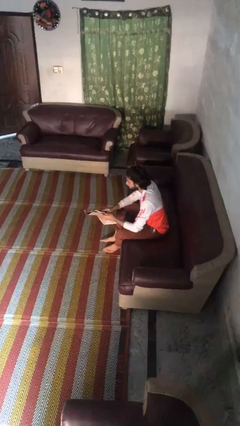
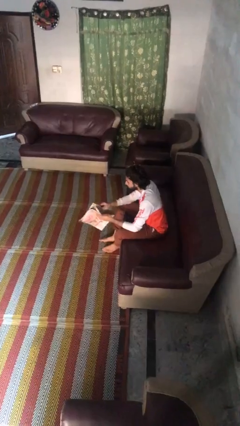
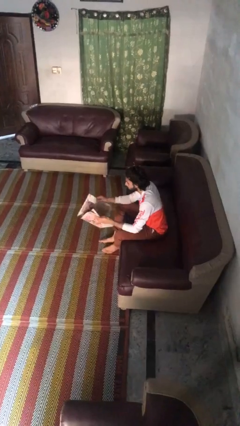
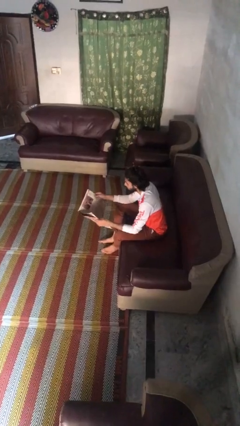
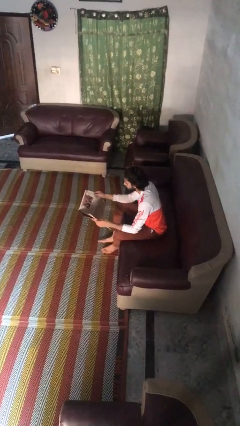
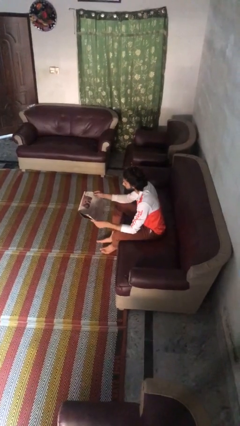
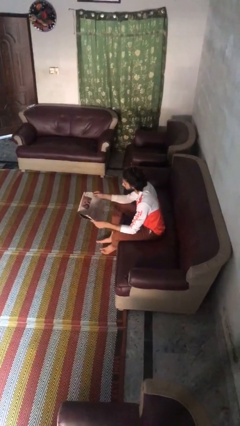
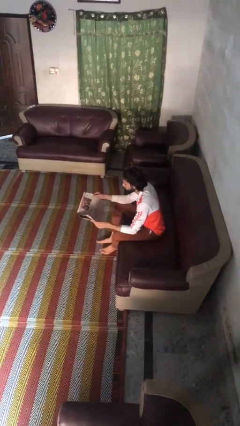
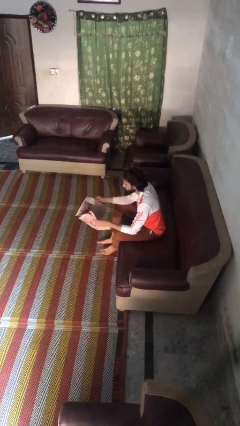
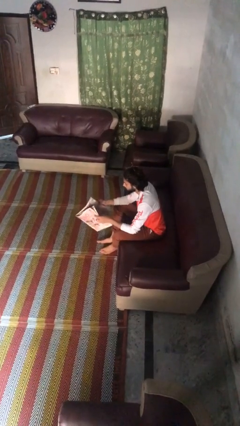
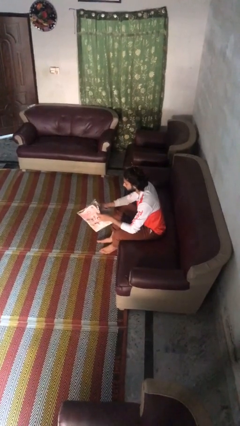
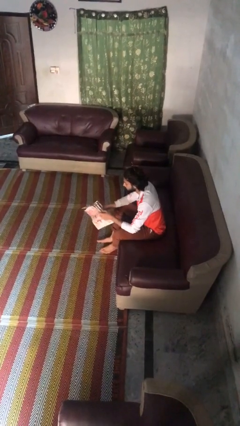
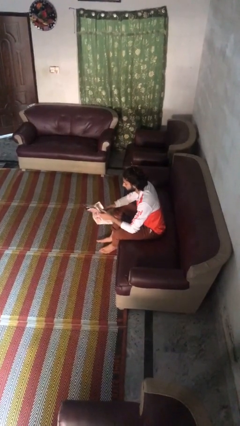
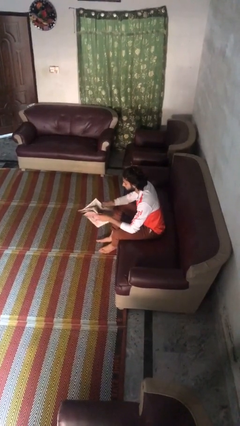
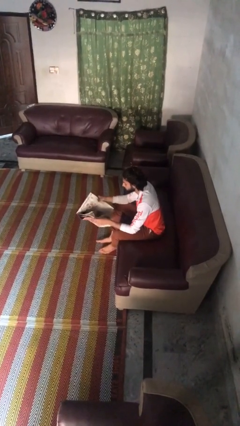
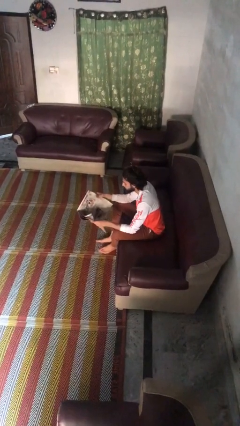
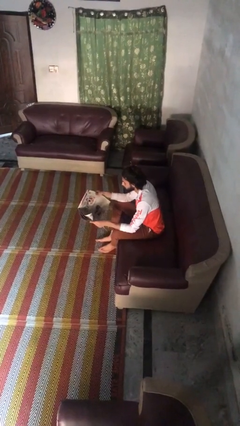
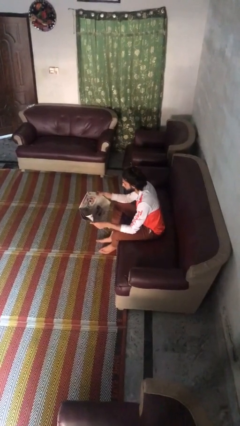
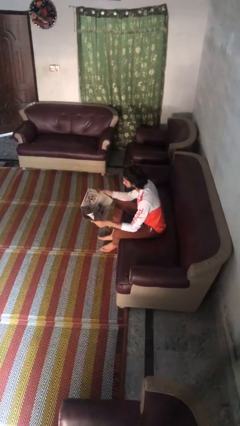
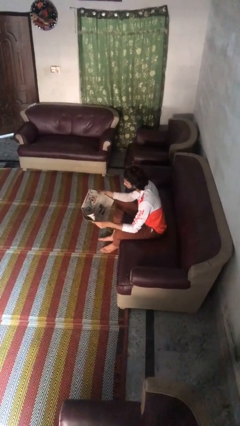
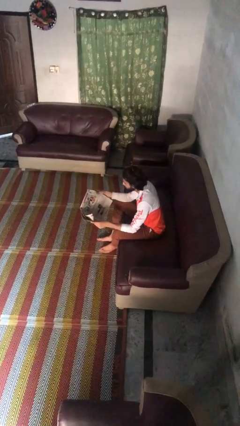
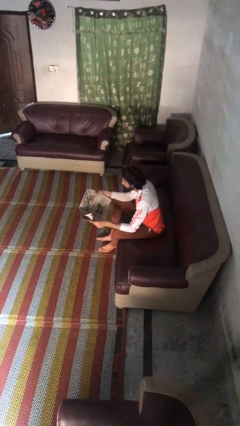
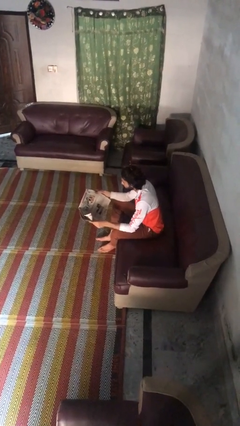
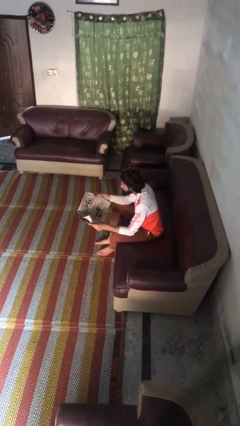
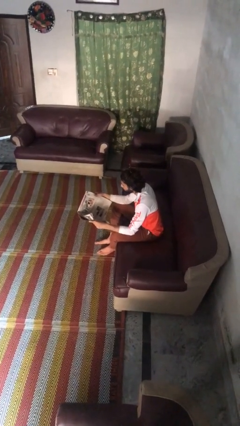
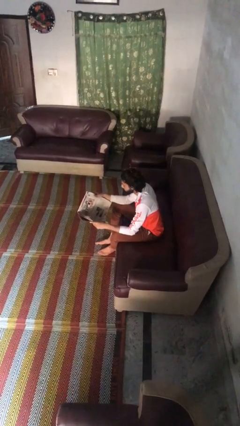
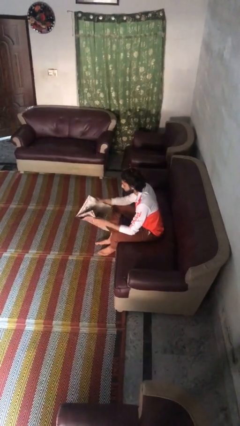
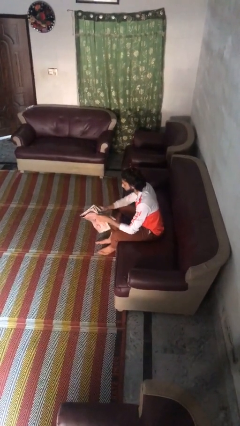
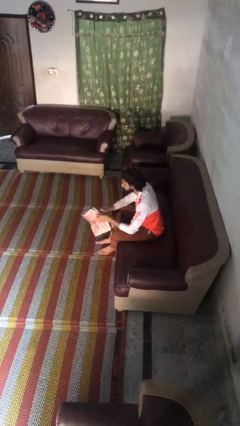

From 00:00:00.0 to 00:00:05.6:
person reads magazine

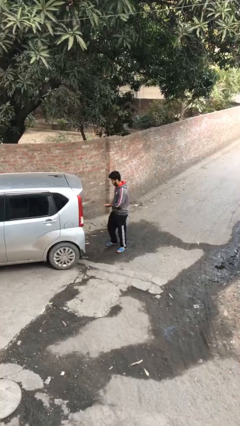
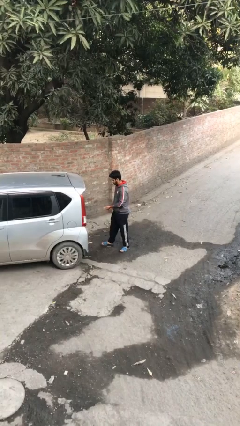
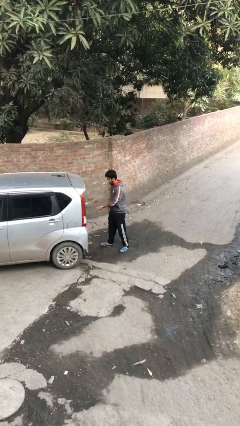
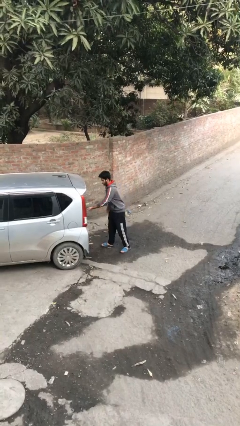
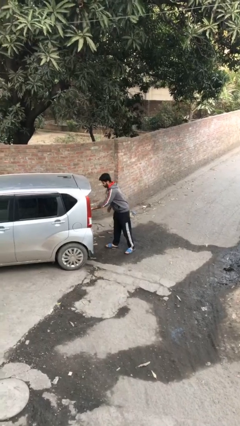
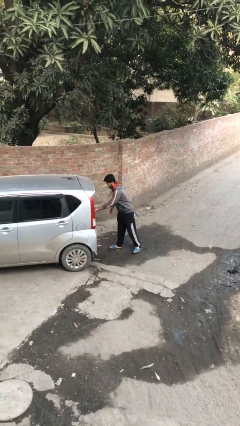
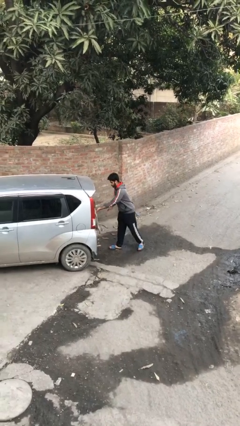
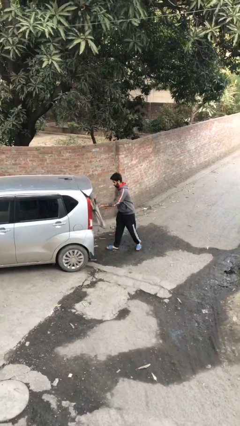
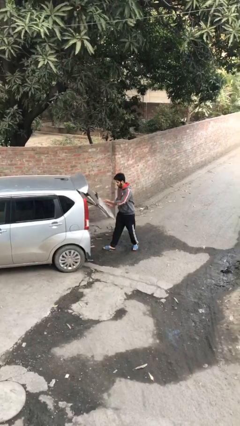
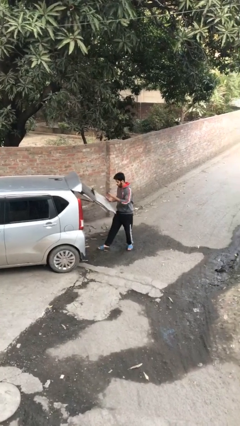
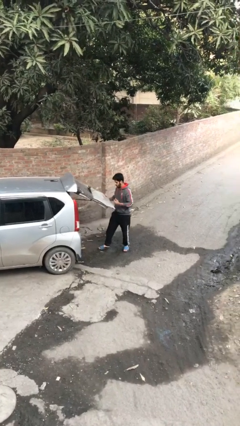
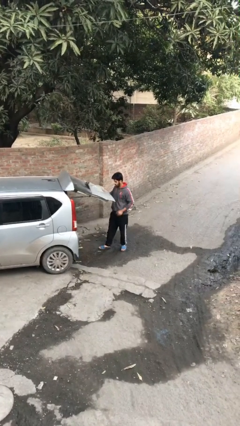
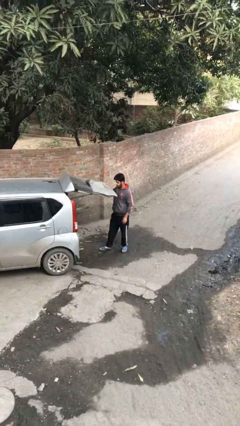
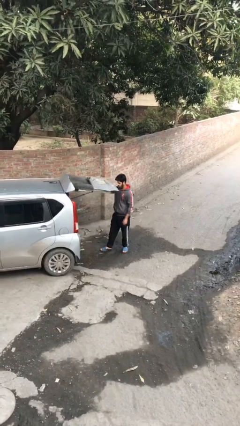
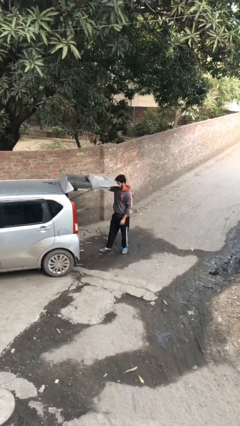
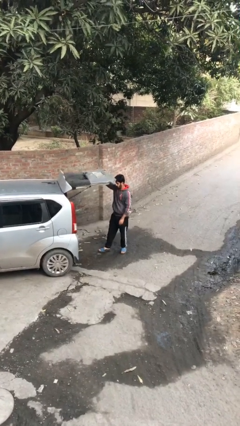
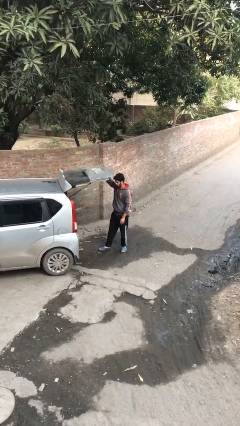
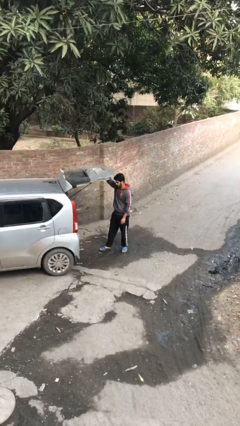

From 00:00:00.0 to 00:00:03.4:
person opens car trunk

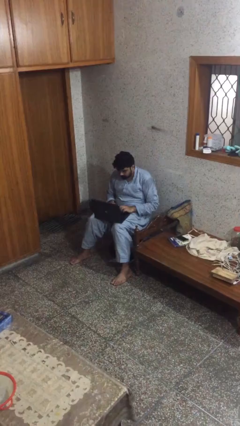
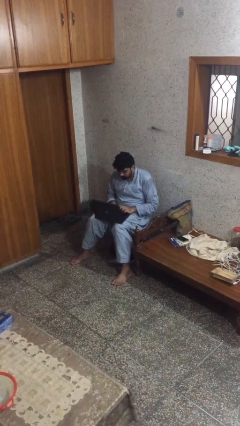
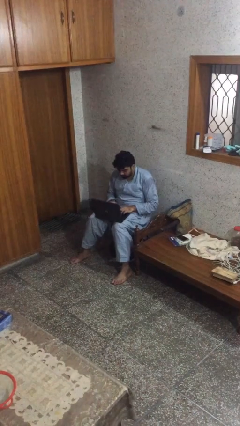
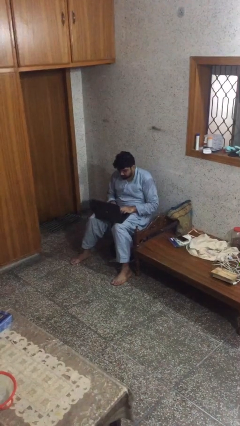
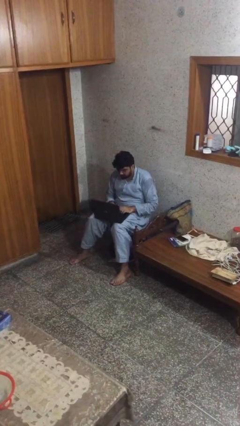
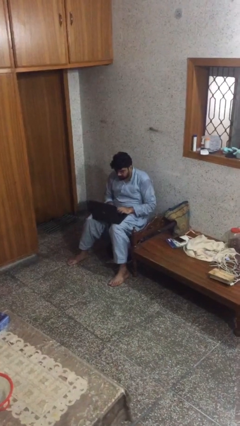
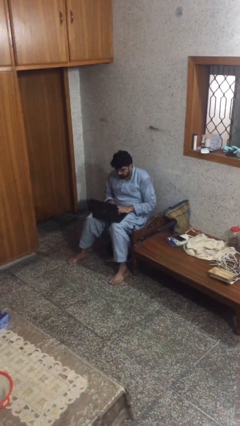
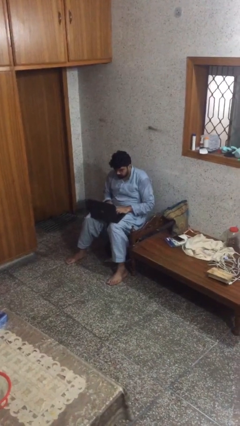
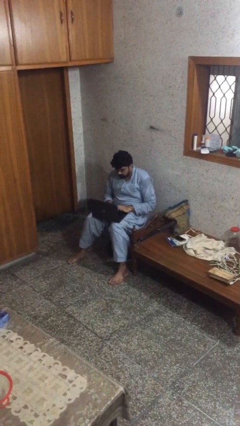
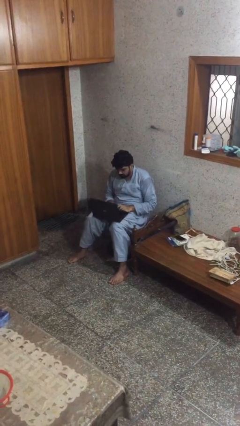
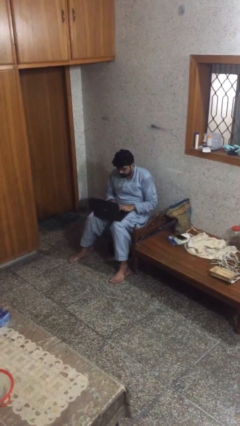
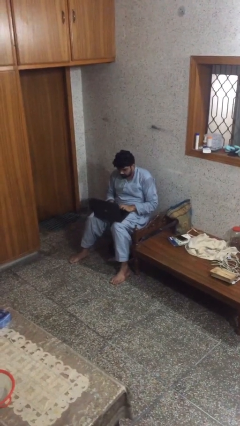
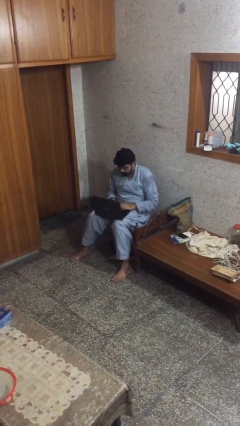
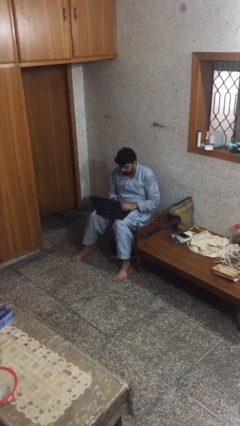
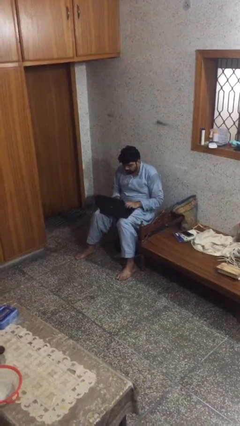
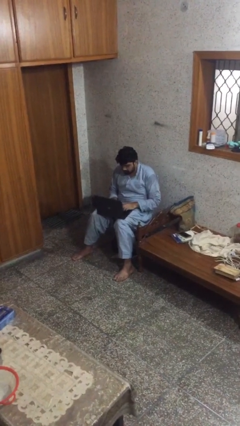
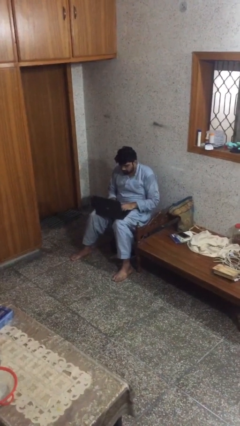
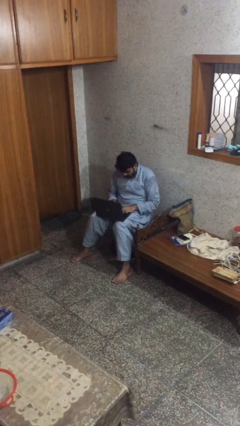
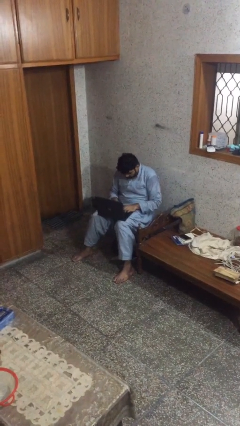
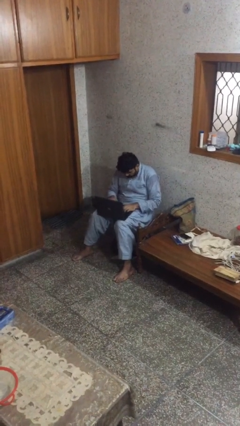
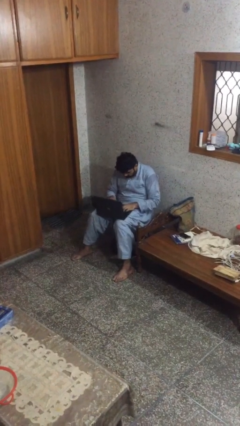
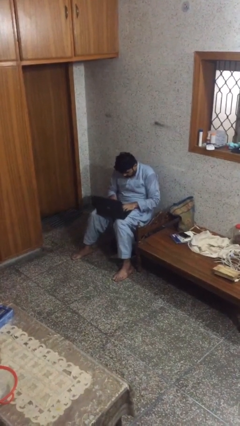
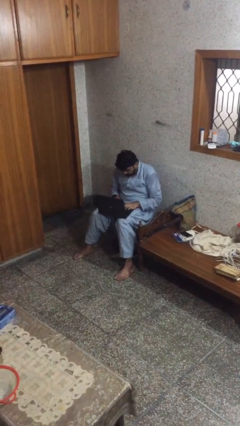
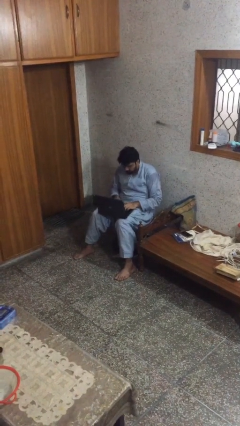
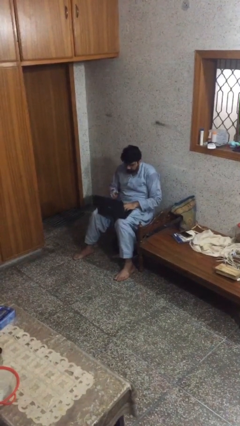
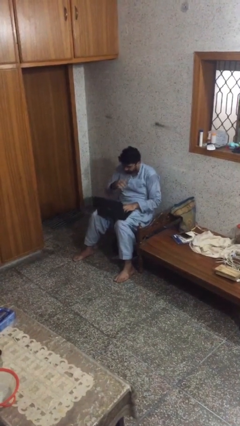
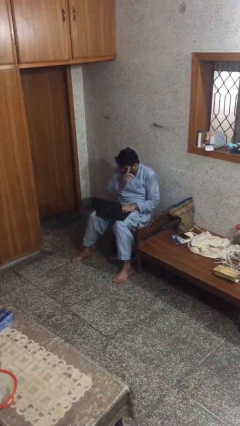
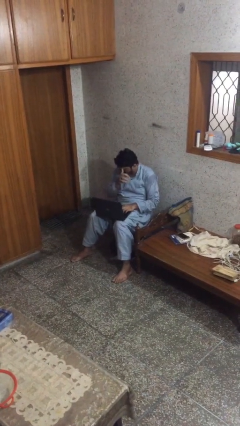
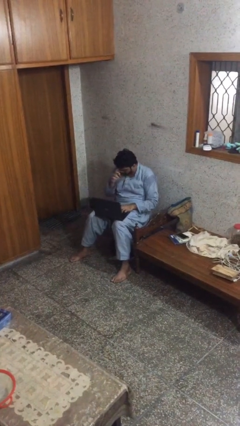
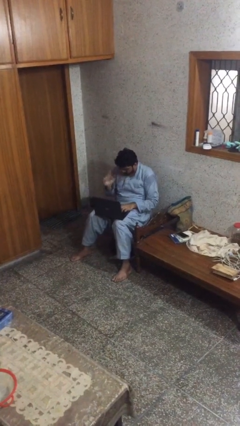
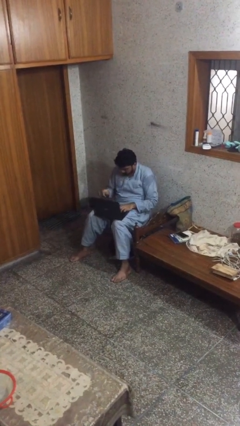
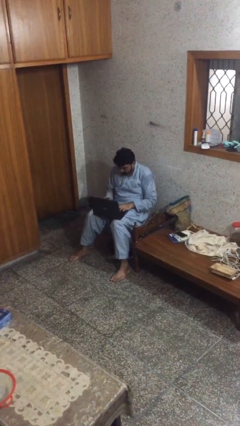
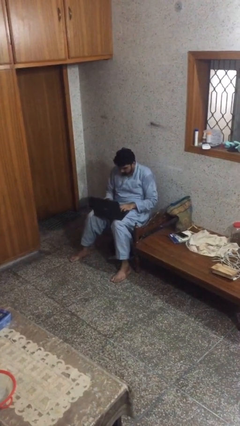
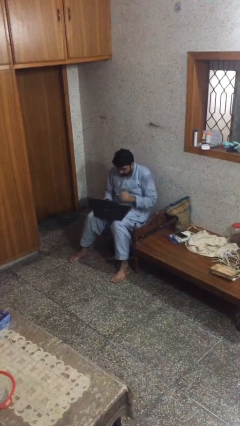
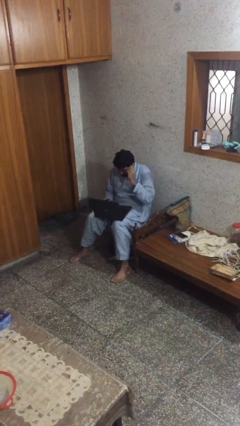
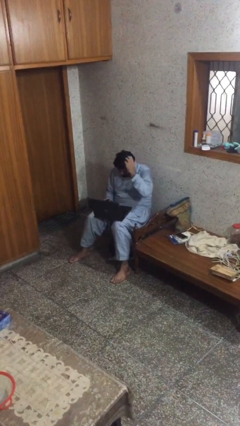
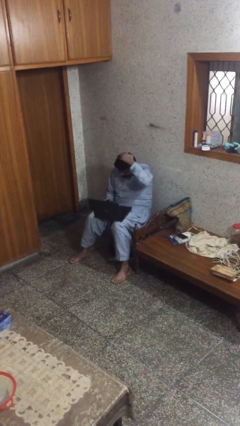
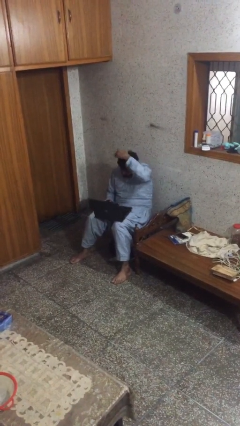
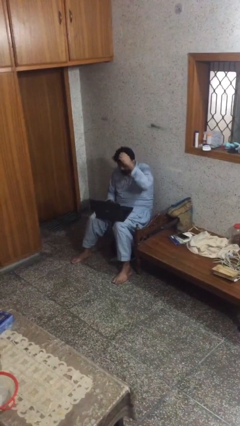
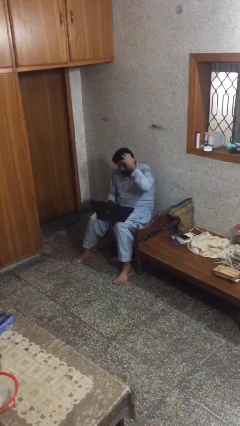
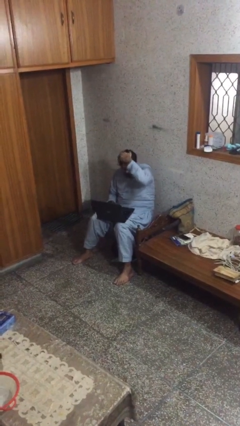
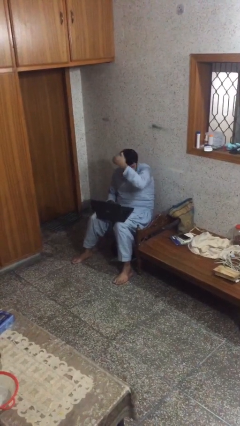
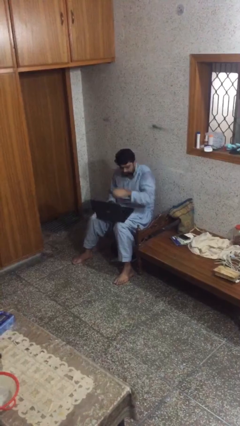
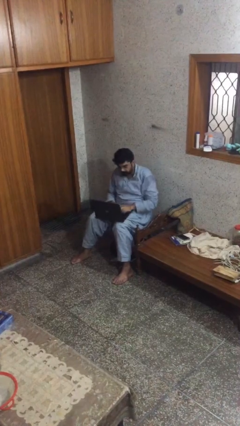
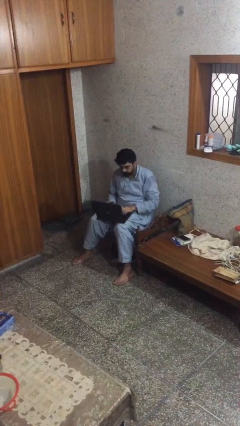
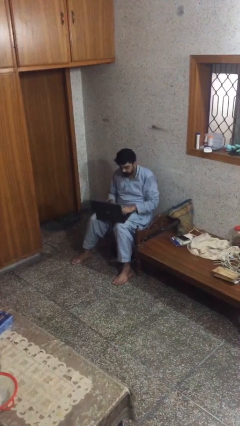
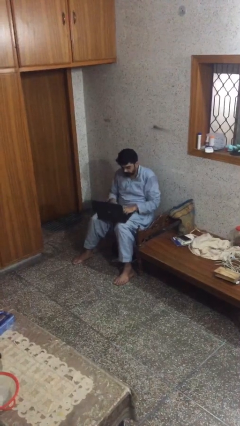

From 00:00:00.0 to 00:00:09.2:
person interacts with laptop
